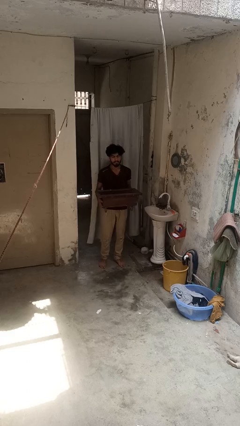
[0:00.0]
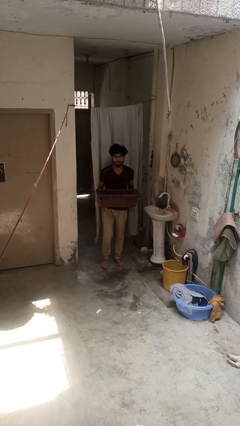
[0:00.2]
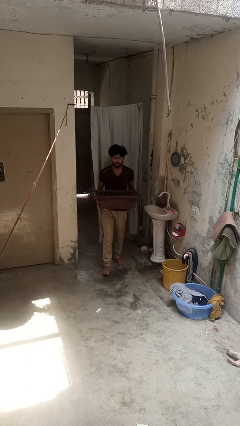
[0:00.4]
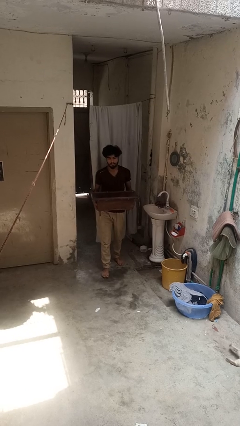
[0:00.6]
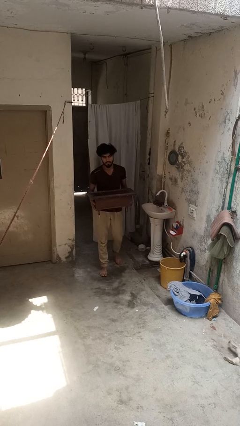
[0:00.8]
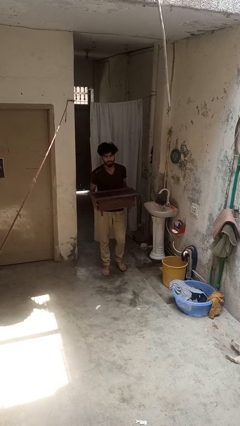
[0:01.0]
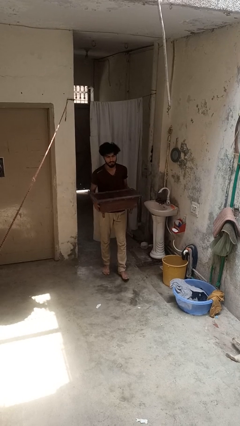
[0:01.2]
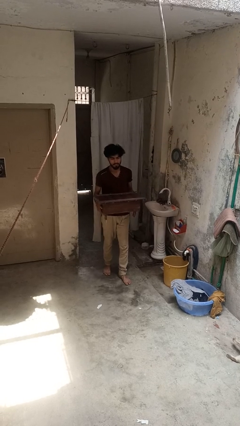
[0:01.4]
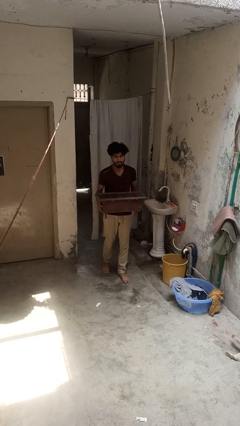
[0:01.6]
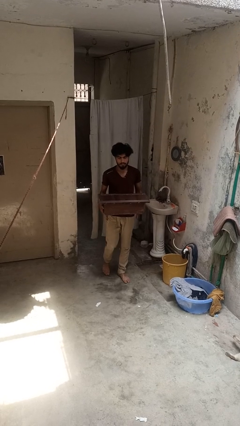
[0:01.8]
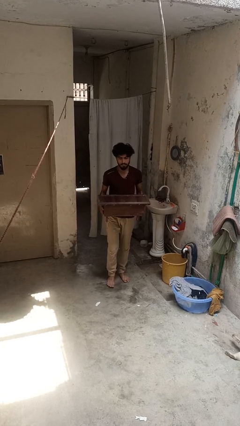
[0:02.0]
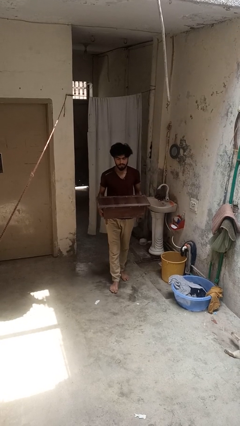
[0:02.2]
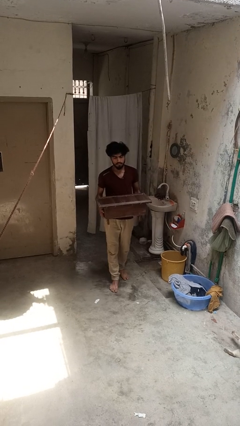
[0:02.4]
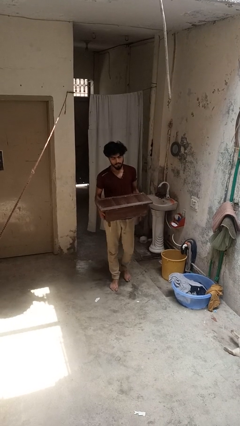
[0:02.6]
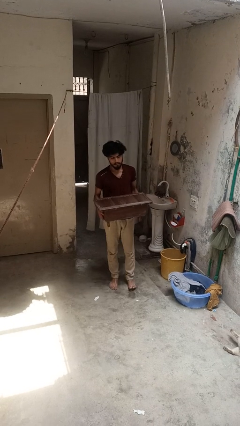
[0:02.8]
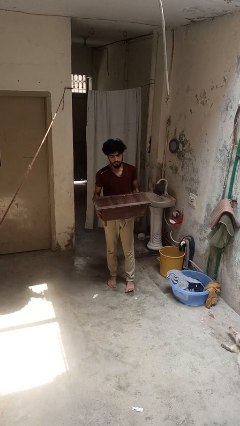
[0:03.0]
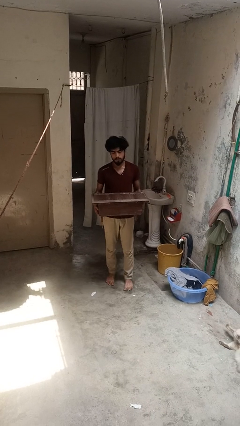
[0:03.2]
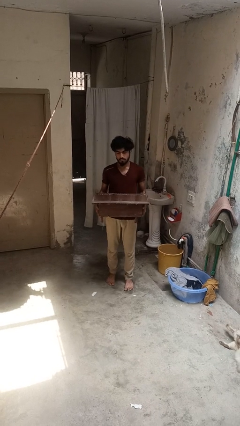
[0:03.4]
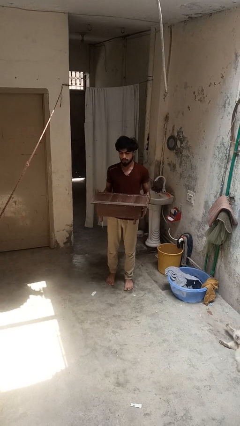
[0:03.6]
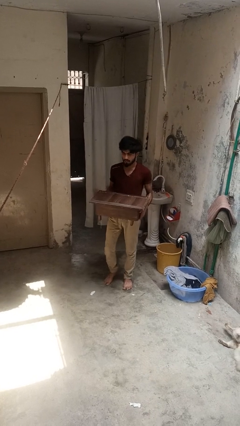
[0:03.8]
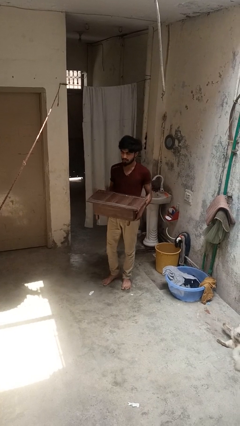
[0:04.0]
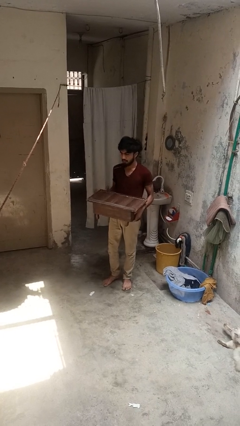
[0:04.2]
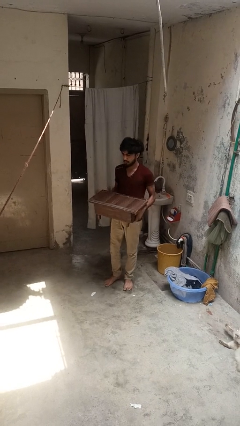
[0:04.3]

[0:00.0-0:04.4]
person carries furniture

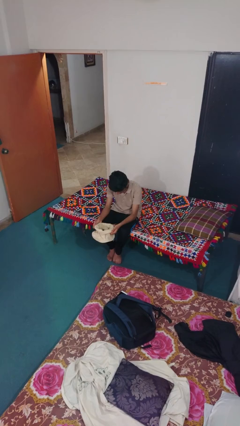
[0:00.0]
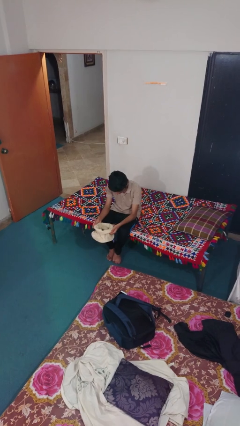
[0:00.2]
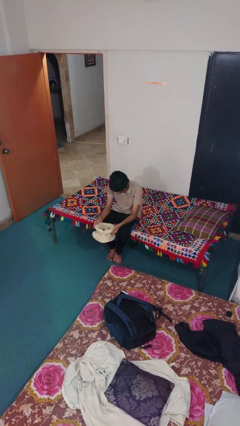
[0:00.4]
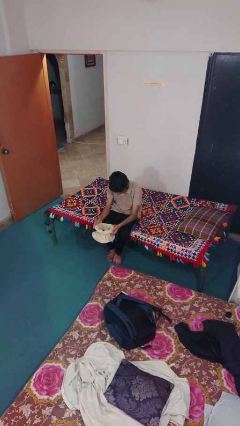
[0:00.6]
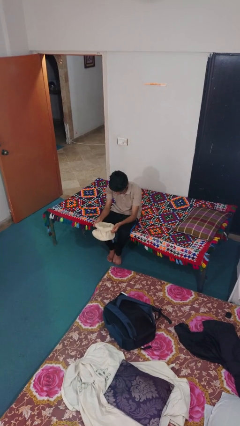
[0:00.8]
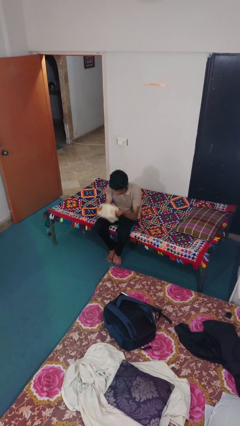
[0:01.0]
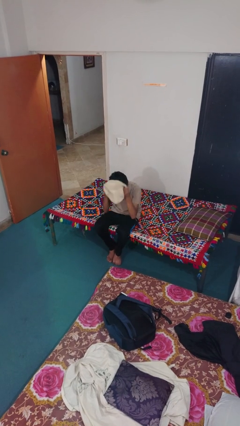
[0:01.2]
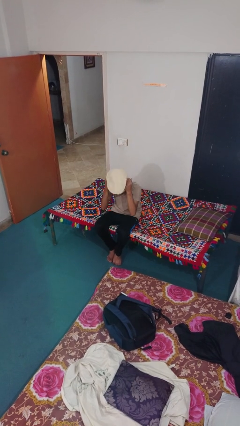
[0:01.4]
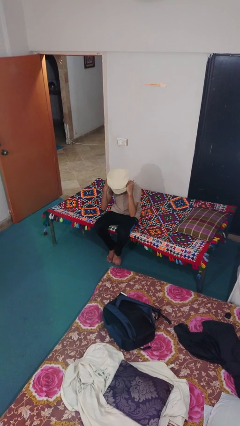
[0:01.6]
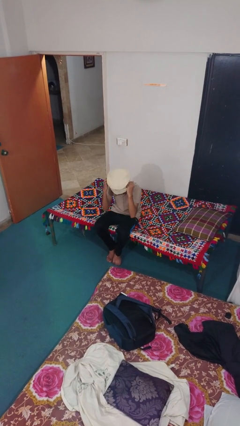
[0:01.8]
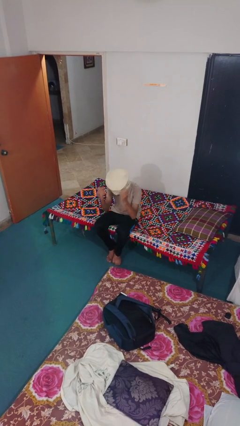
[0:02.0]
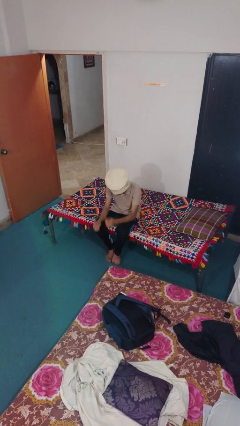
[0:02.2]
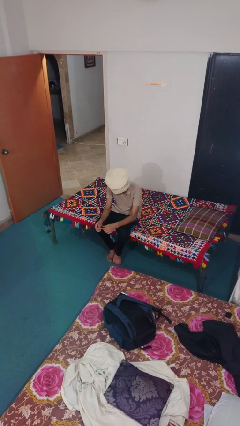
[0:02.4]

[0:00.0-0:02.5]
person puts on hat

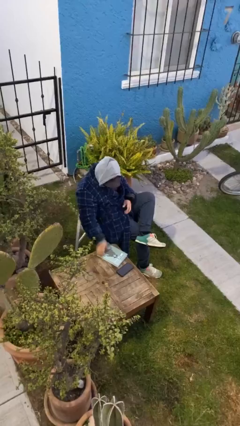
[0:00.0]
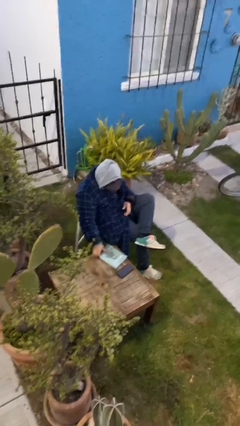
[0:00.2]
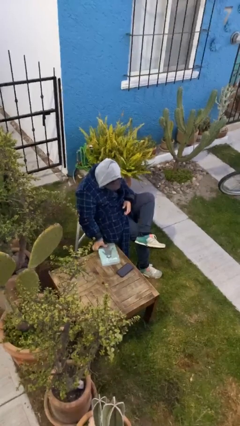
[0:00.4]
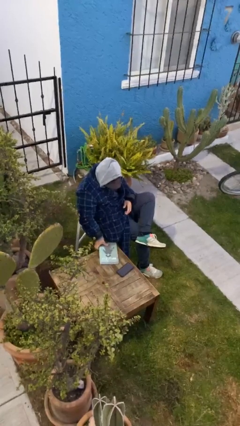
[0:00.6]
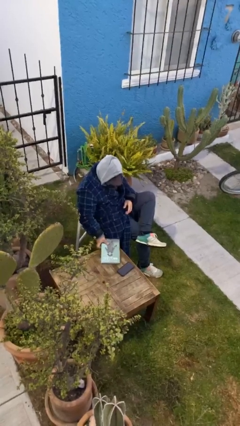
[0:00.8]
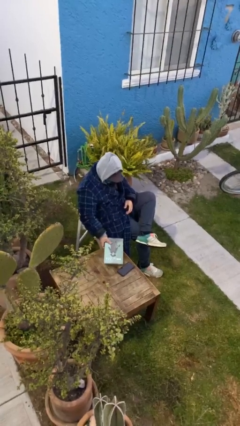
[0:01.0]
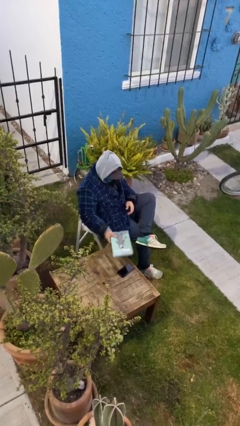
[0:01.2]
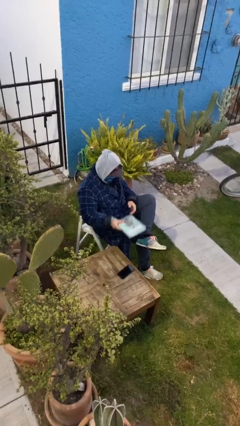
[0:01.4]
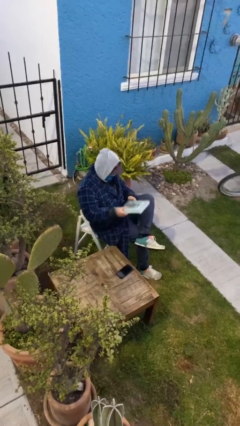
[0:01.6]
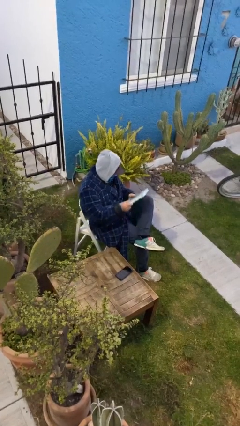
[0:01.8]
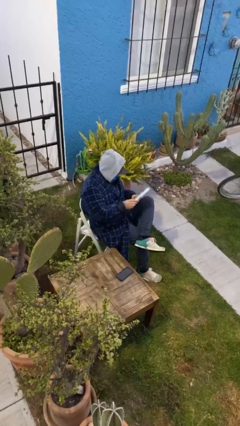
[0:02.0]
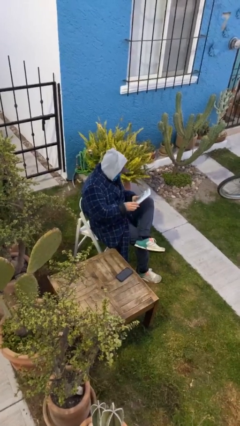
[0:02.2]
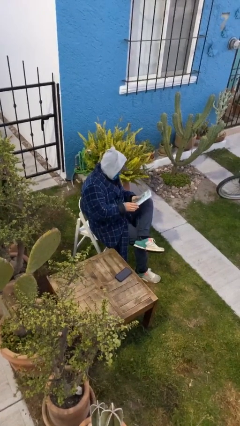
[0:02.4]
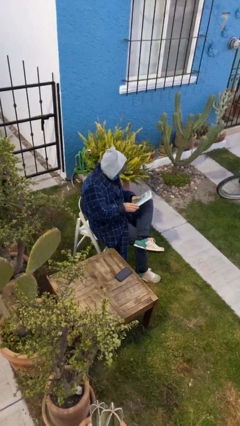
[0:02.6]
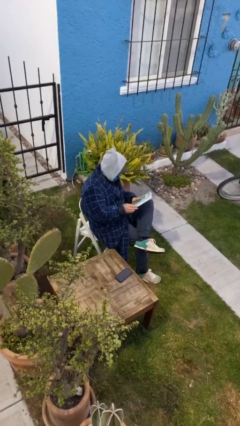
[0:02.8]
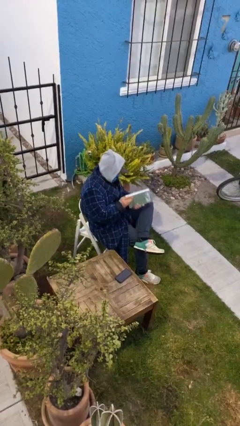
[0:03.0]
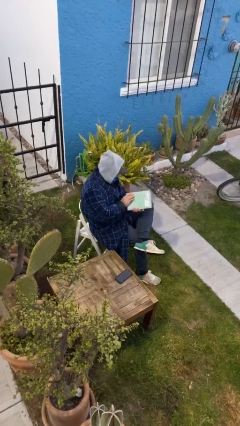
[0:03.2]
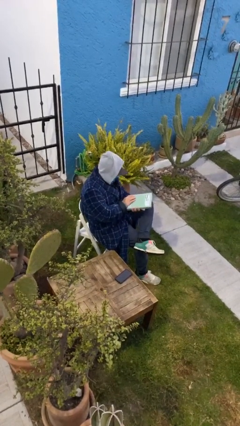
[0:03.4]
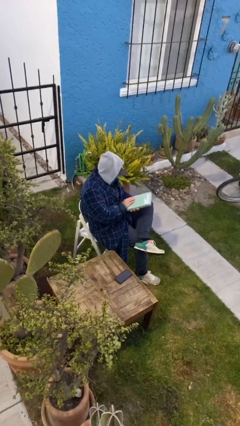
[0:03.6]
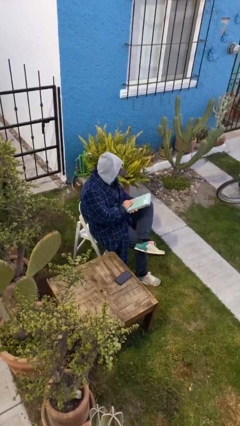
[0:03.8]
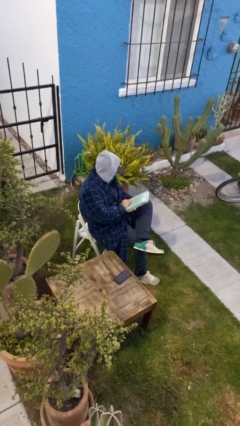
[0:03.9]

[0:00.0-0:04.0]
person picks up object from table

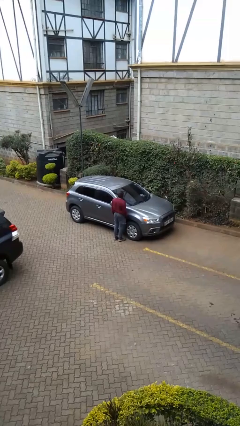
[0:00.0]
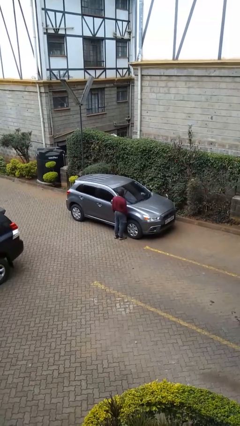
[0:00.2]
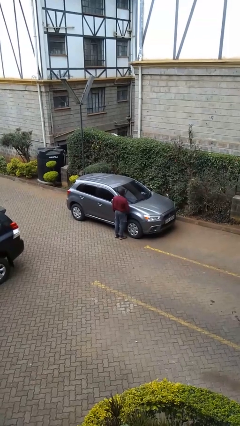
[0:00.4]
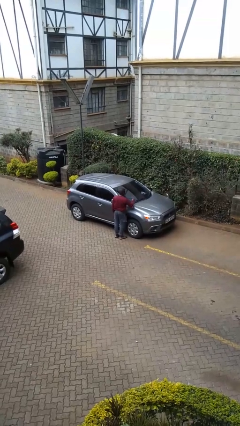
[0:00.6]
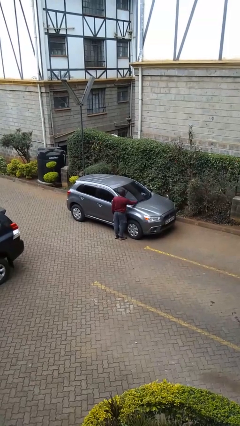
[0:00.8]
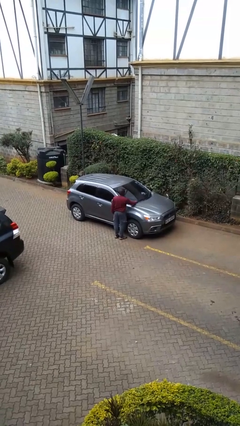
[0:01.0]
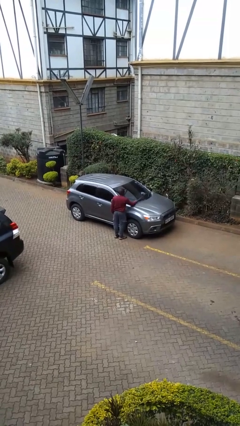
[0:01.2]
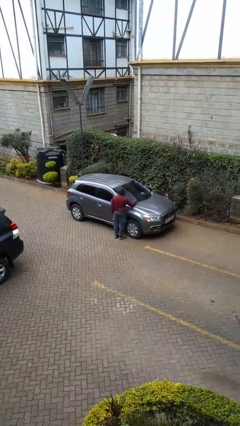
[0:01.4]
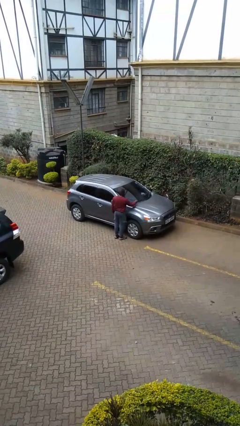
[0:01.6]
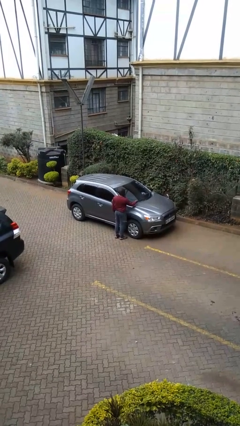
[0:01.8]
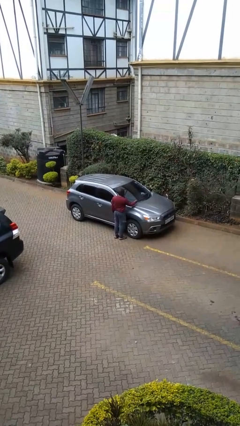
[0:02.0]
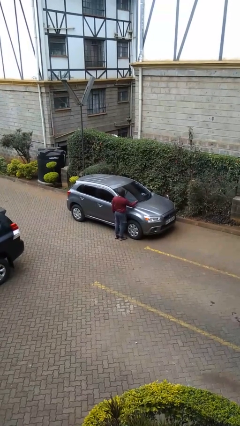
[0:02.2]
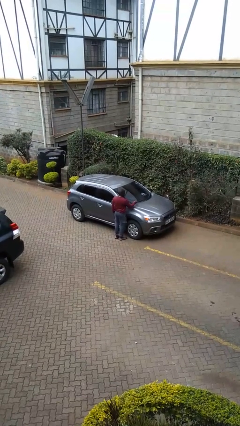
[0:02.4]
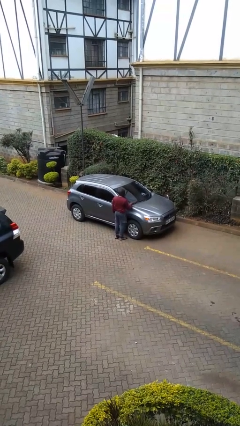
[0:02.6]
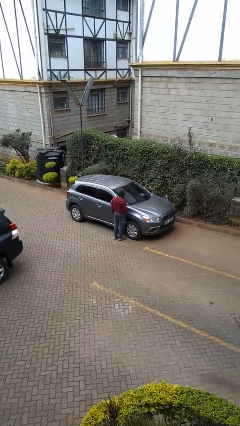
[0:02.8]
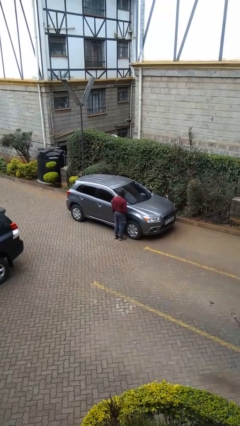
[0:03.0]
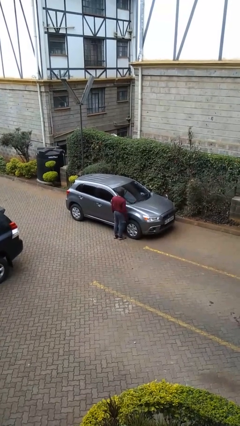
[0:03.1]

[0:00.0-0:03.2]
person flips up car wipers

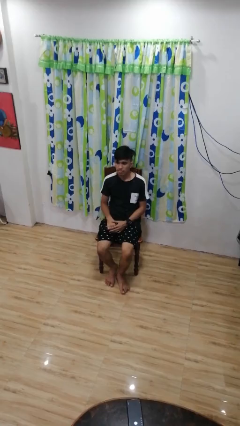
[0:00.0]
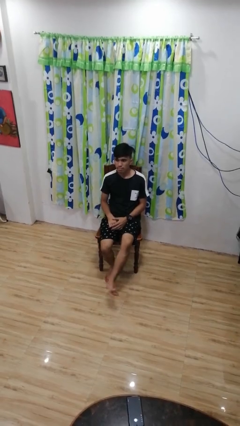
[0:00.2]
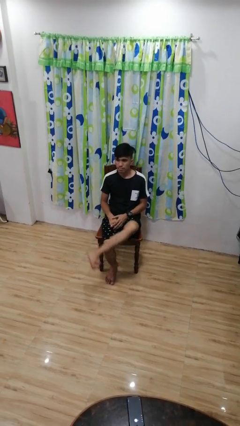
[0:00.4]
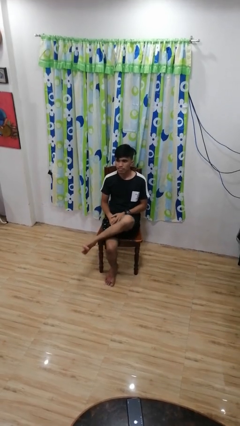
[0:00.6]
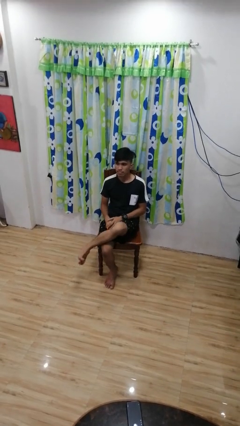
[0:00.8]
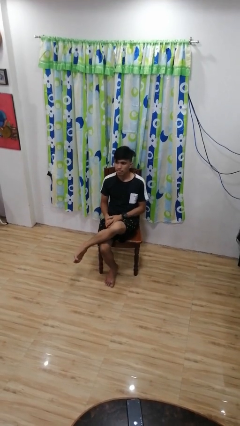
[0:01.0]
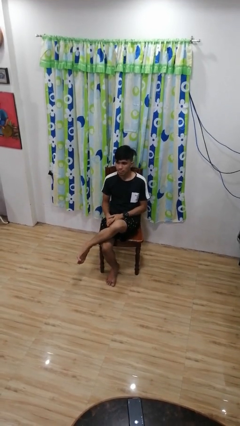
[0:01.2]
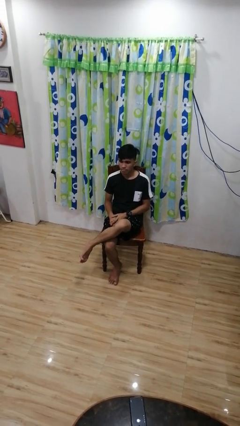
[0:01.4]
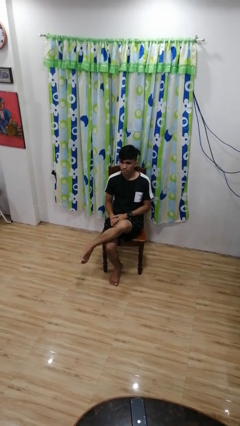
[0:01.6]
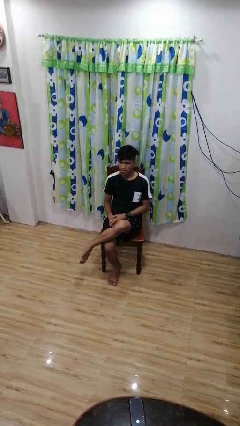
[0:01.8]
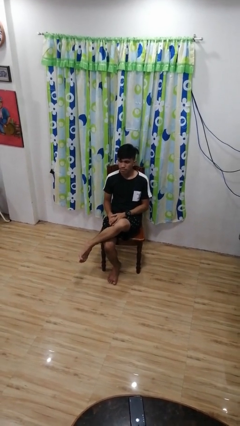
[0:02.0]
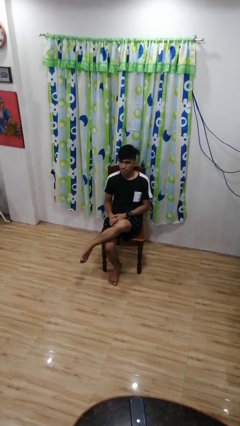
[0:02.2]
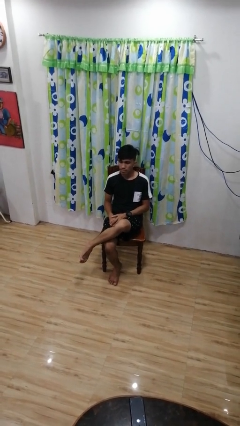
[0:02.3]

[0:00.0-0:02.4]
person crosses legs

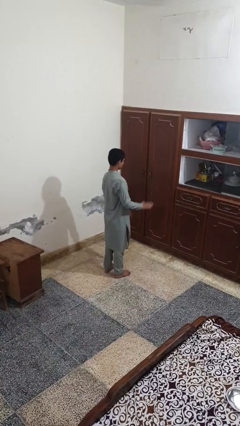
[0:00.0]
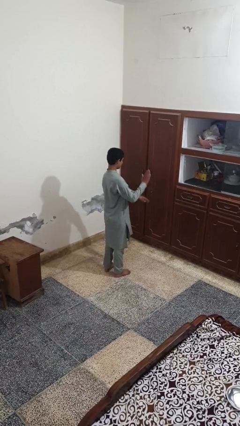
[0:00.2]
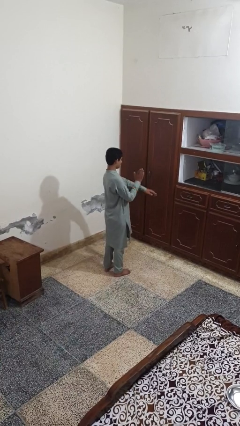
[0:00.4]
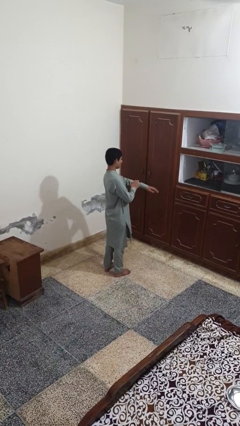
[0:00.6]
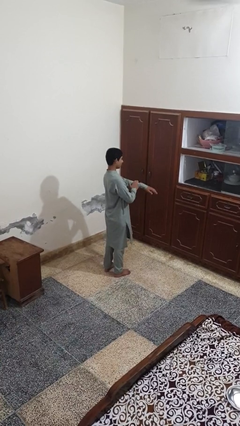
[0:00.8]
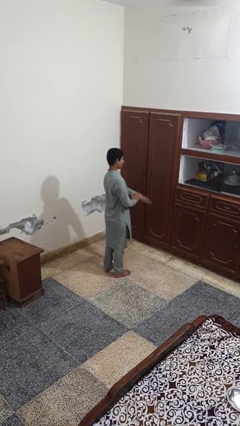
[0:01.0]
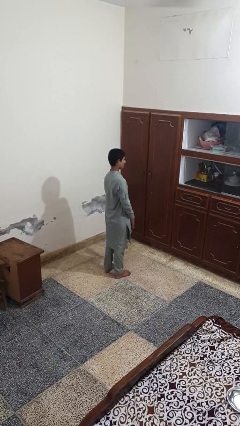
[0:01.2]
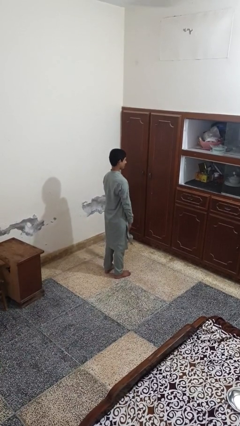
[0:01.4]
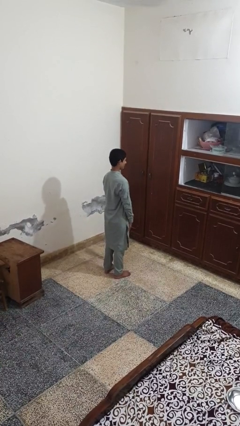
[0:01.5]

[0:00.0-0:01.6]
person swats bug
